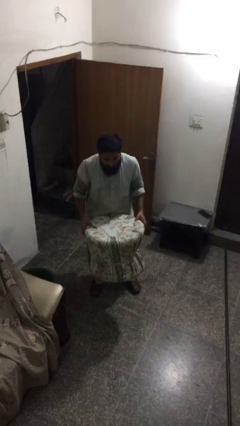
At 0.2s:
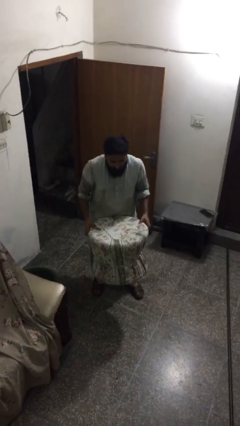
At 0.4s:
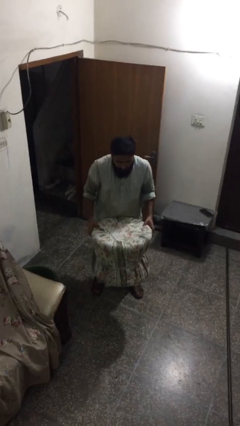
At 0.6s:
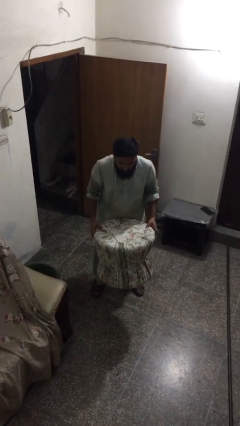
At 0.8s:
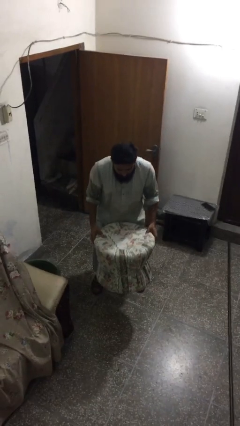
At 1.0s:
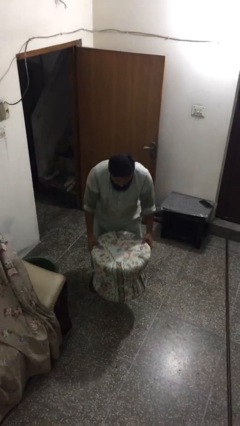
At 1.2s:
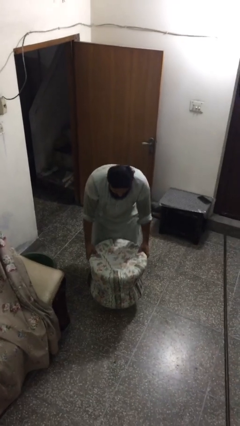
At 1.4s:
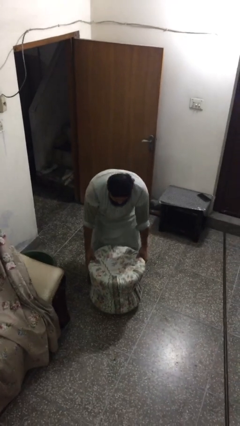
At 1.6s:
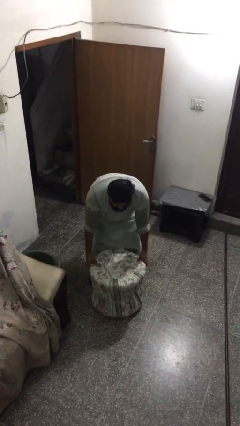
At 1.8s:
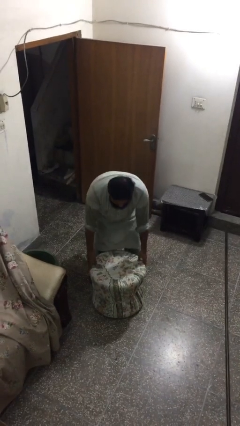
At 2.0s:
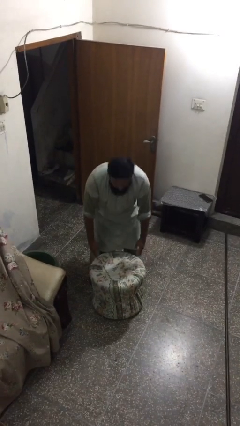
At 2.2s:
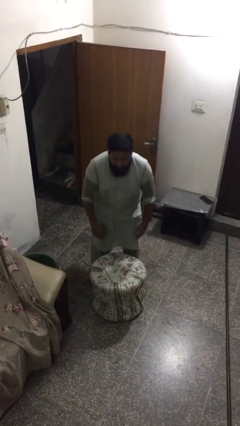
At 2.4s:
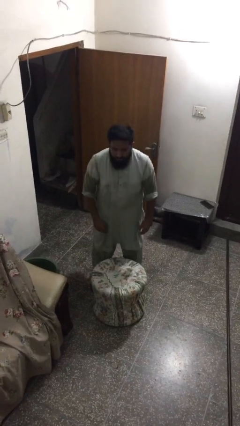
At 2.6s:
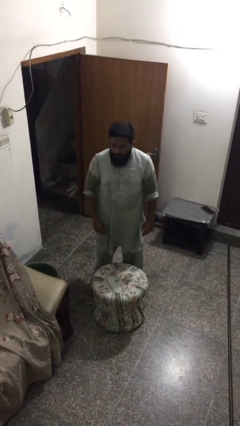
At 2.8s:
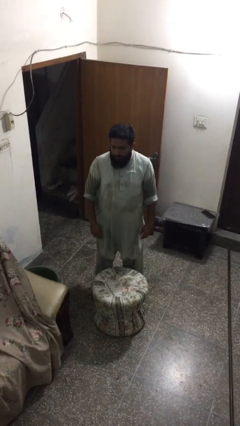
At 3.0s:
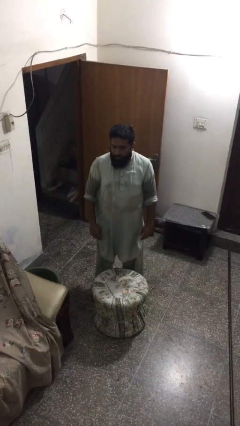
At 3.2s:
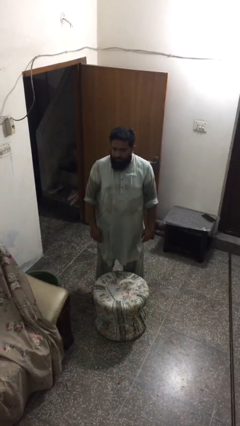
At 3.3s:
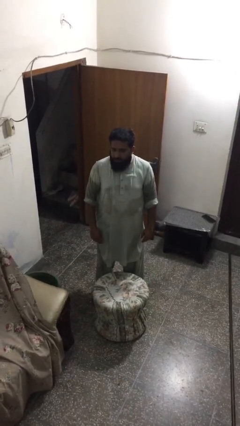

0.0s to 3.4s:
person puts down object on floor

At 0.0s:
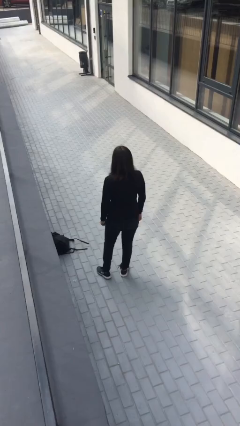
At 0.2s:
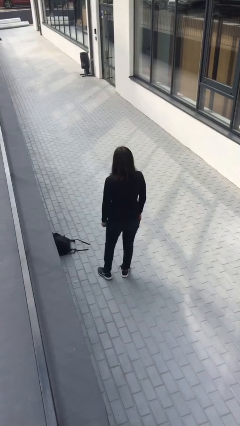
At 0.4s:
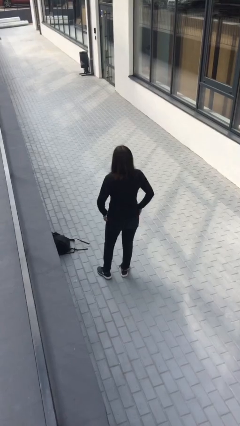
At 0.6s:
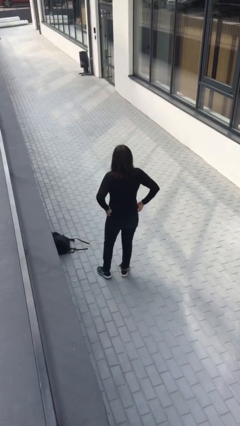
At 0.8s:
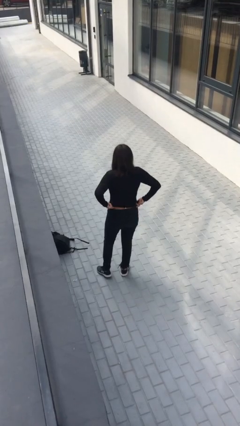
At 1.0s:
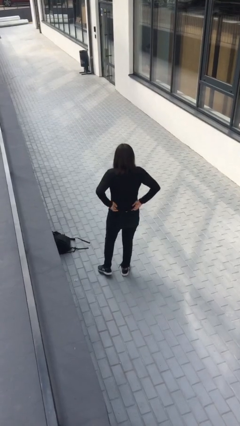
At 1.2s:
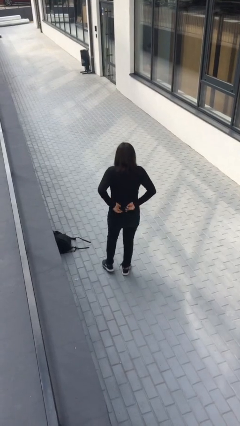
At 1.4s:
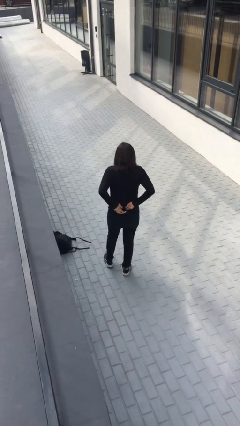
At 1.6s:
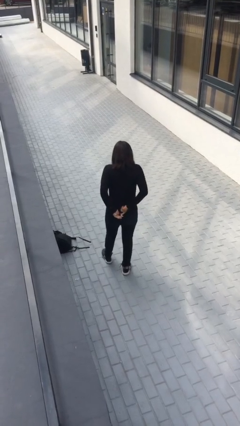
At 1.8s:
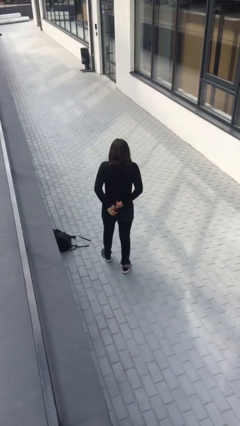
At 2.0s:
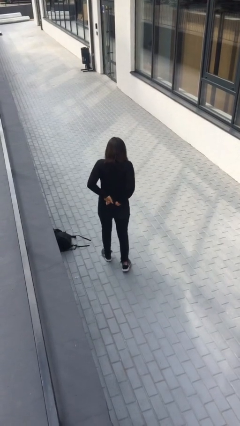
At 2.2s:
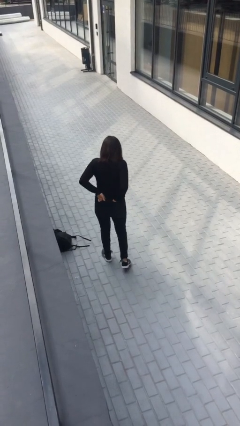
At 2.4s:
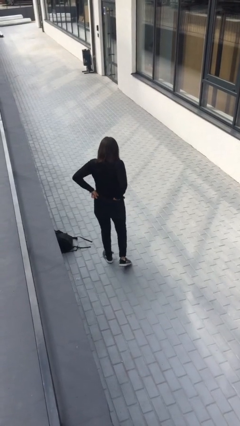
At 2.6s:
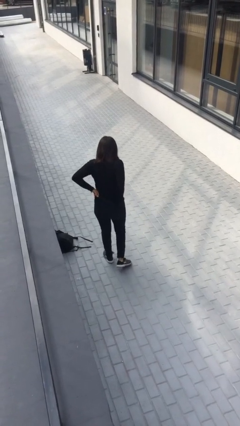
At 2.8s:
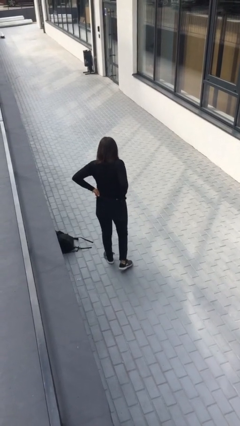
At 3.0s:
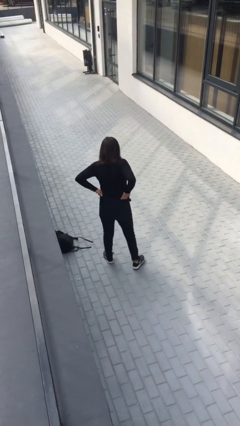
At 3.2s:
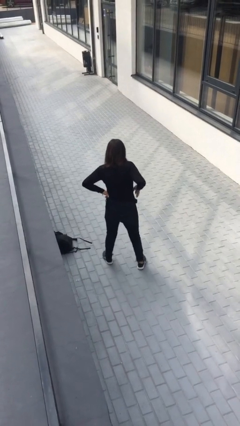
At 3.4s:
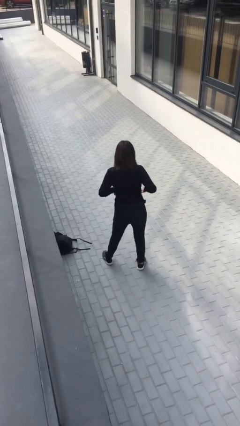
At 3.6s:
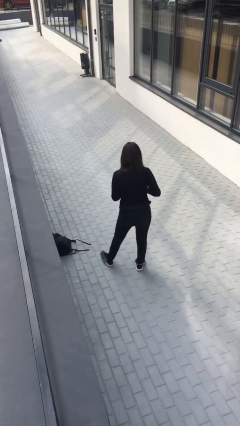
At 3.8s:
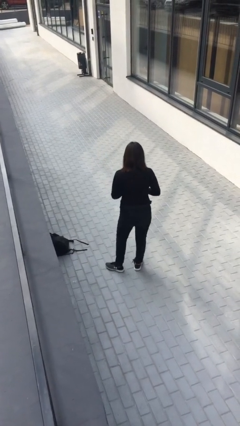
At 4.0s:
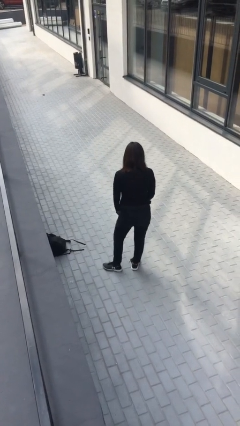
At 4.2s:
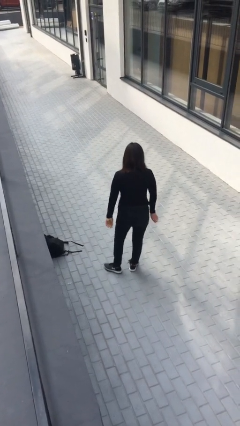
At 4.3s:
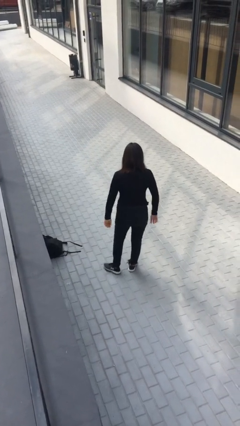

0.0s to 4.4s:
person tucks in shirt

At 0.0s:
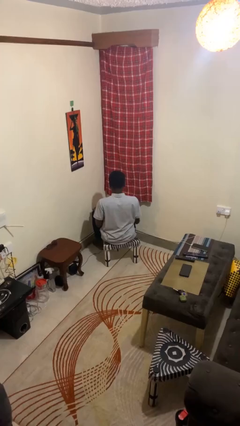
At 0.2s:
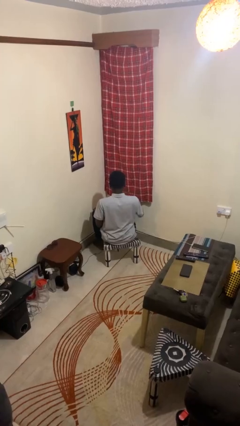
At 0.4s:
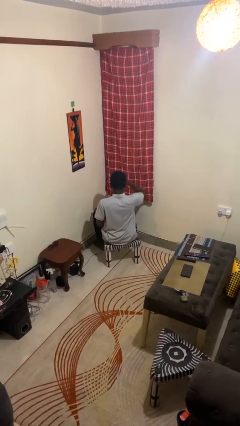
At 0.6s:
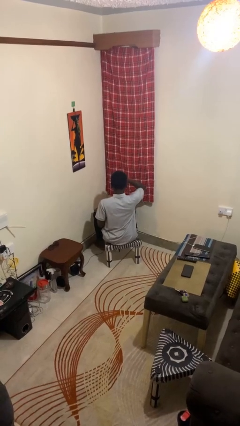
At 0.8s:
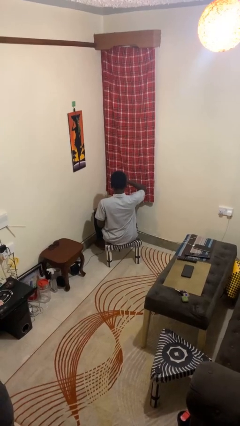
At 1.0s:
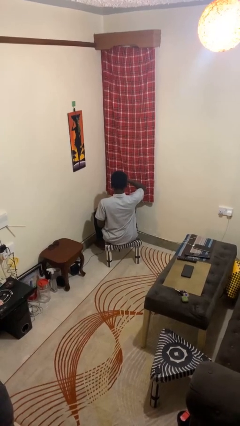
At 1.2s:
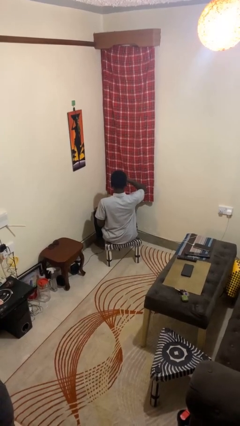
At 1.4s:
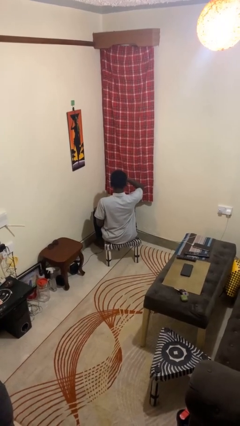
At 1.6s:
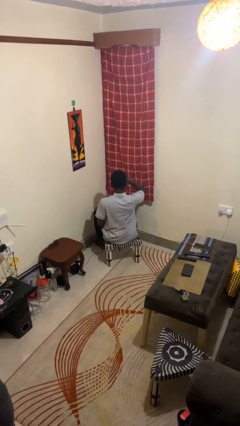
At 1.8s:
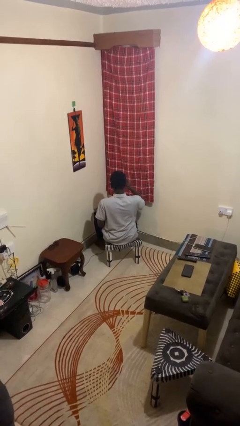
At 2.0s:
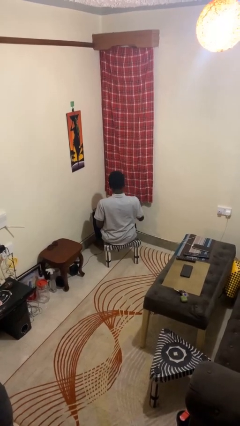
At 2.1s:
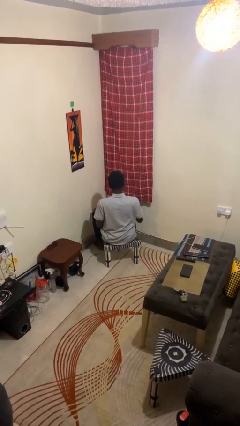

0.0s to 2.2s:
person scratches face

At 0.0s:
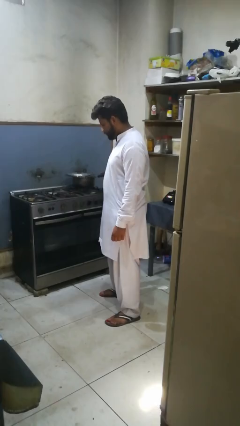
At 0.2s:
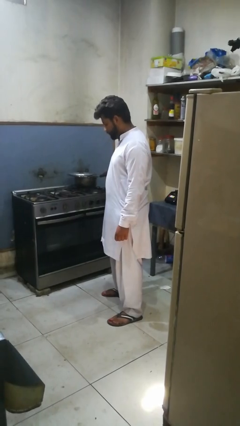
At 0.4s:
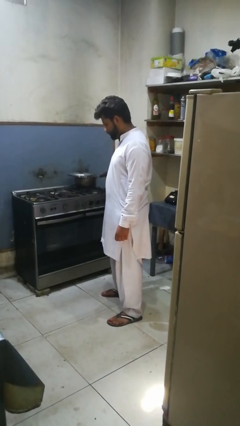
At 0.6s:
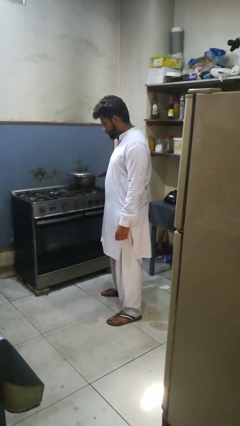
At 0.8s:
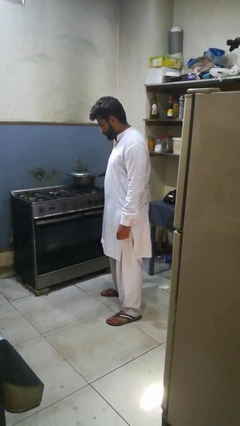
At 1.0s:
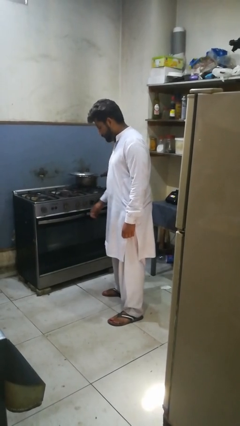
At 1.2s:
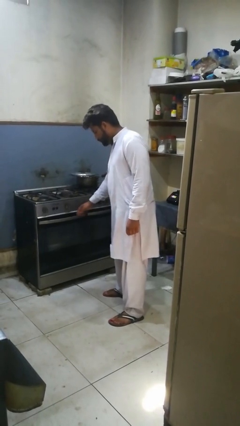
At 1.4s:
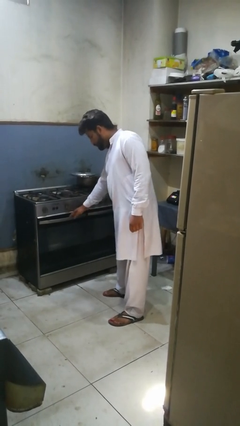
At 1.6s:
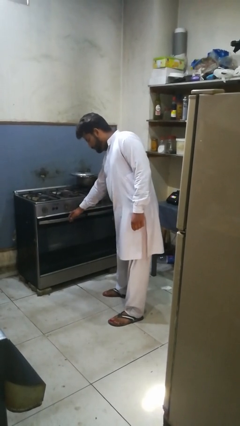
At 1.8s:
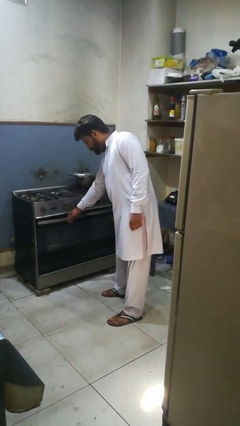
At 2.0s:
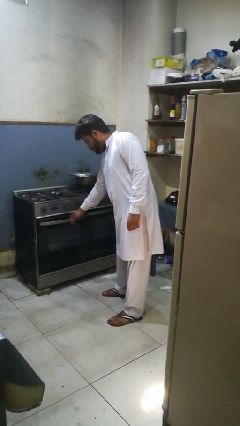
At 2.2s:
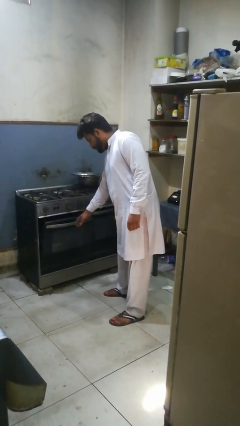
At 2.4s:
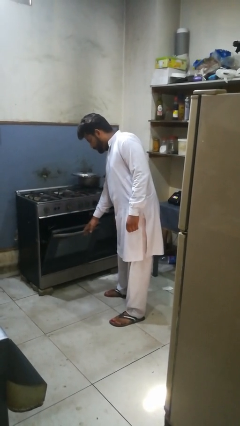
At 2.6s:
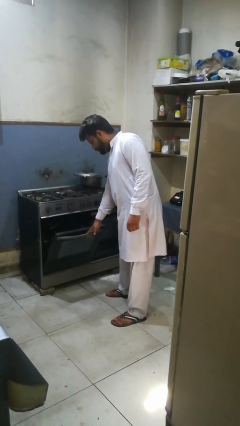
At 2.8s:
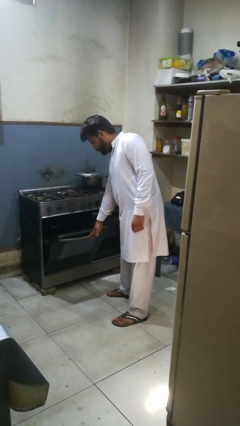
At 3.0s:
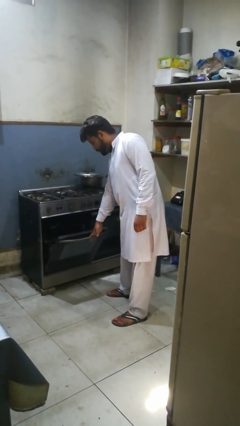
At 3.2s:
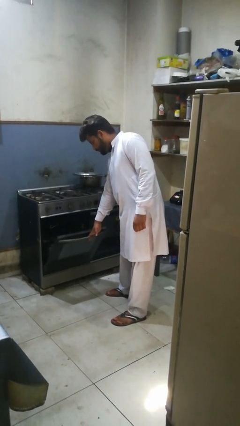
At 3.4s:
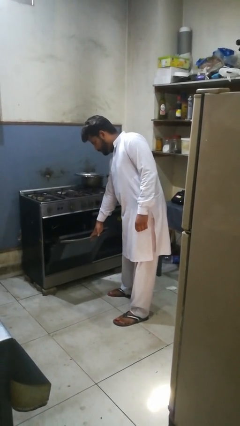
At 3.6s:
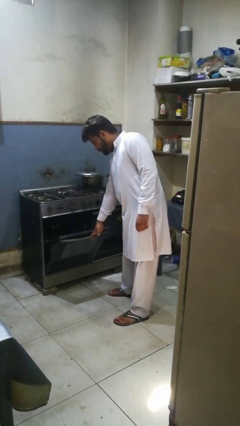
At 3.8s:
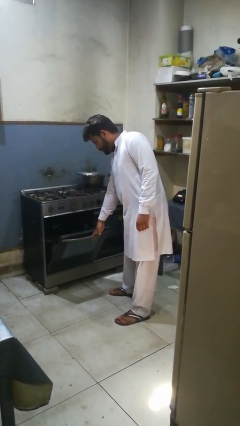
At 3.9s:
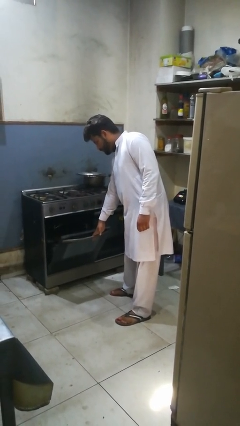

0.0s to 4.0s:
person opens oven door

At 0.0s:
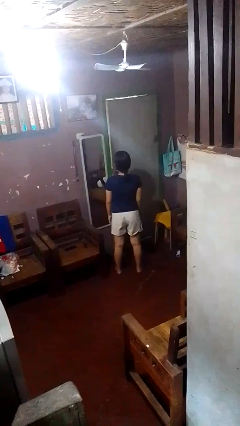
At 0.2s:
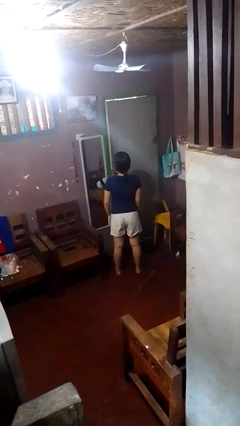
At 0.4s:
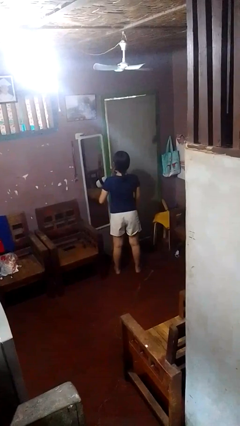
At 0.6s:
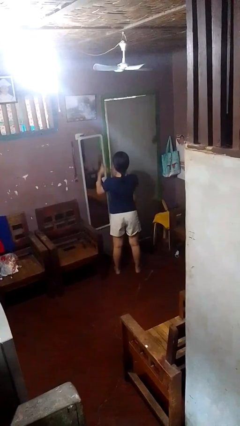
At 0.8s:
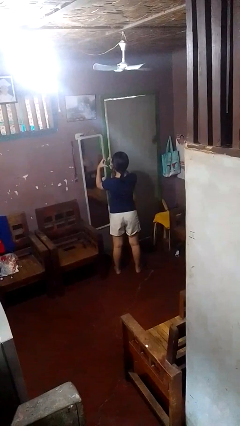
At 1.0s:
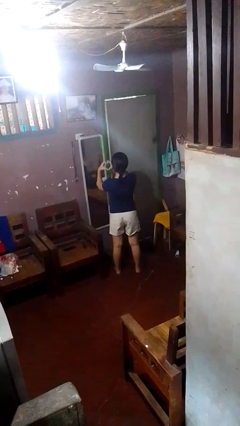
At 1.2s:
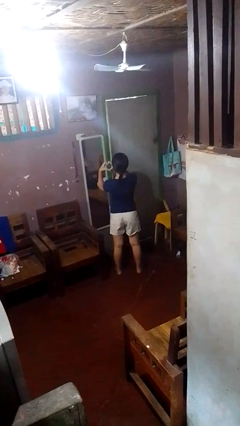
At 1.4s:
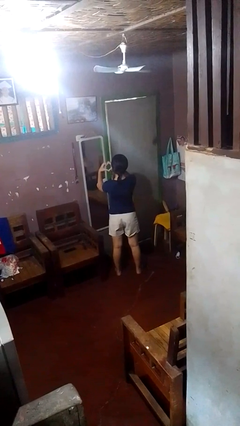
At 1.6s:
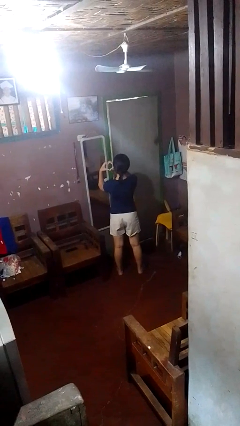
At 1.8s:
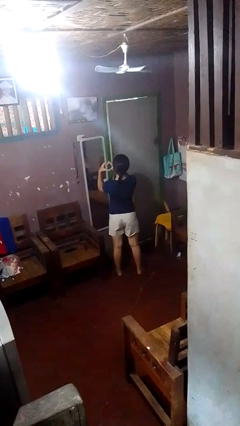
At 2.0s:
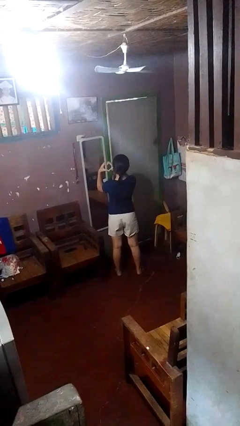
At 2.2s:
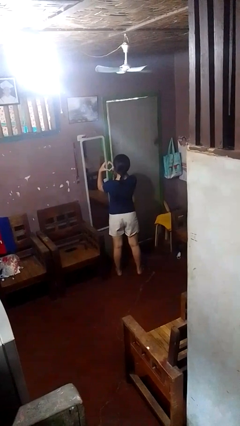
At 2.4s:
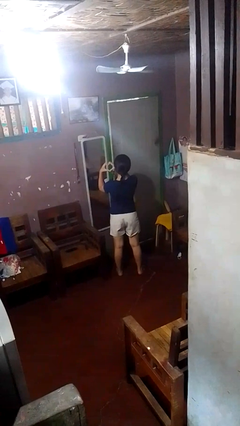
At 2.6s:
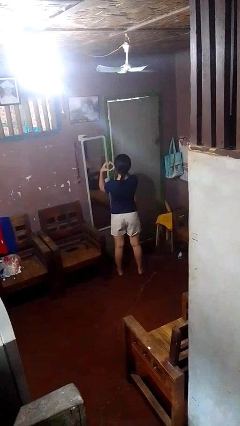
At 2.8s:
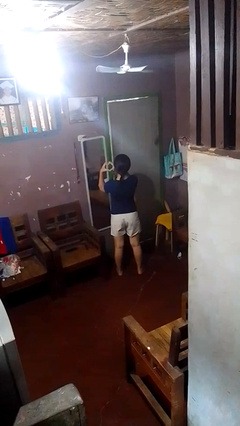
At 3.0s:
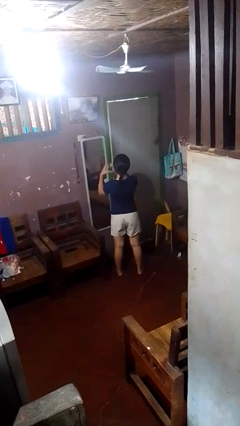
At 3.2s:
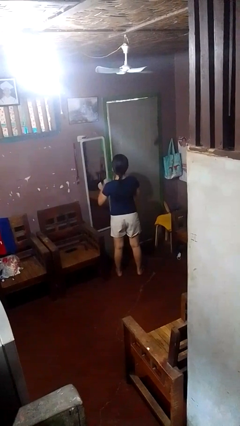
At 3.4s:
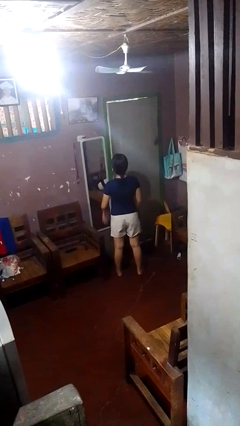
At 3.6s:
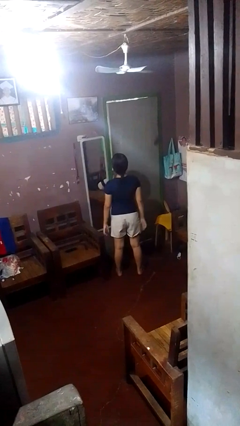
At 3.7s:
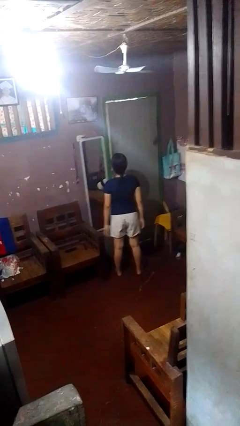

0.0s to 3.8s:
person gestures heart

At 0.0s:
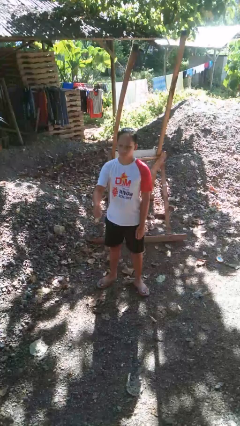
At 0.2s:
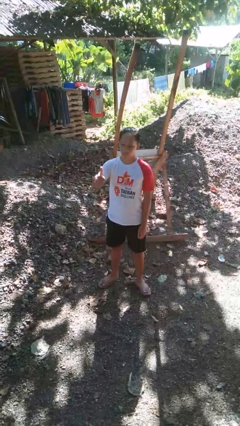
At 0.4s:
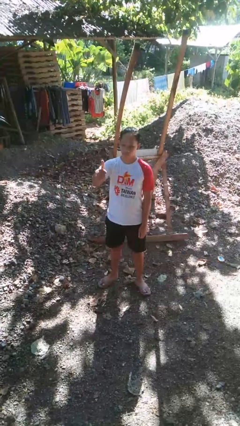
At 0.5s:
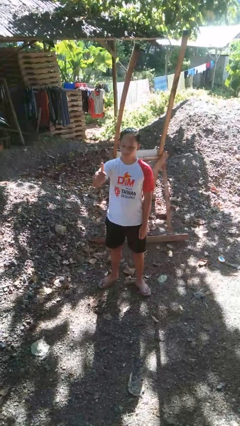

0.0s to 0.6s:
person gestures thumbs up
